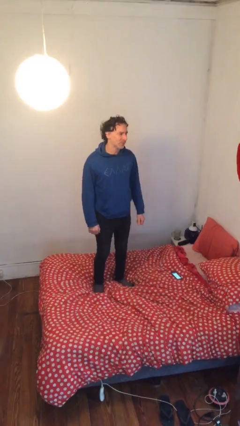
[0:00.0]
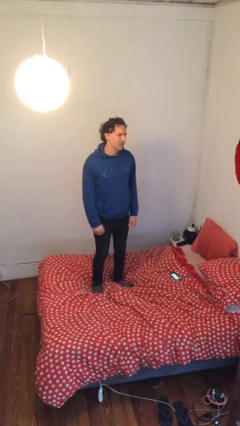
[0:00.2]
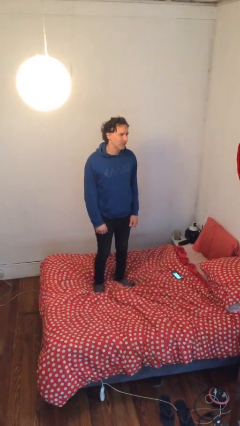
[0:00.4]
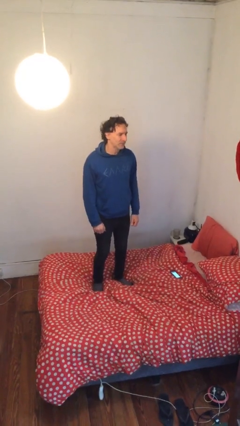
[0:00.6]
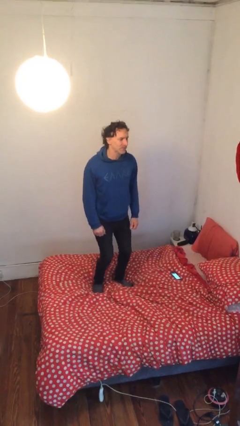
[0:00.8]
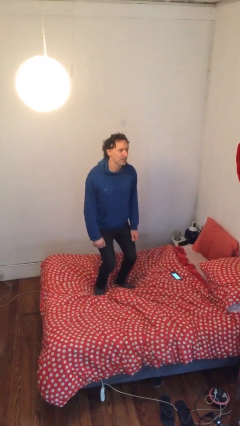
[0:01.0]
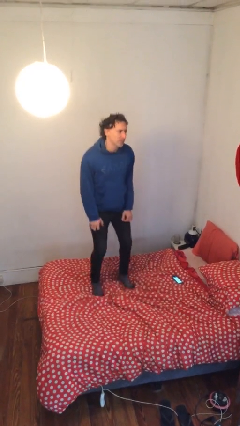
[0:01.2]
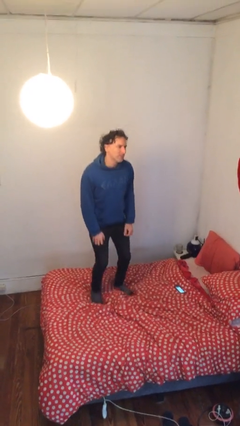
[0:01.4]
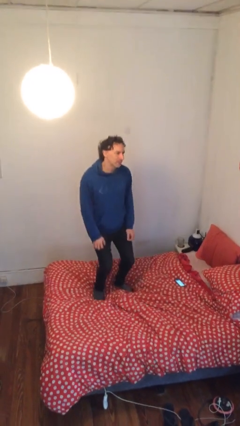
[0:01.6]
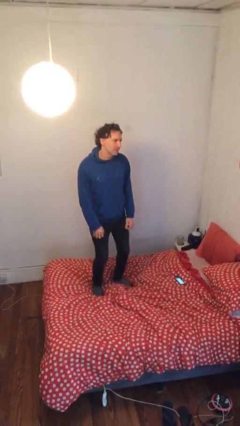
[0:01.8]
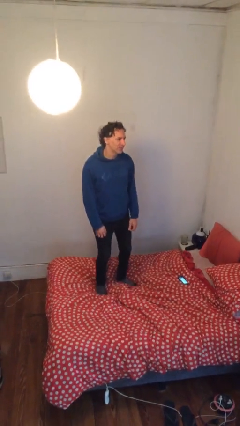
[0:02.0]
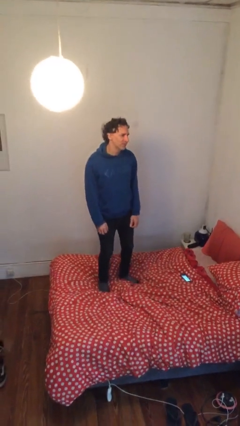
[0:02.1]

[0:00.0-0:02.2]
person jumps on bed

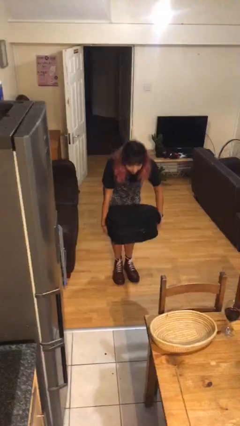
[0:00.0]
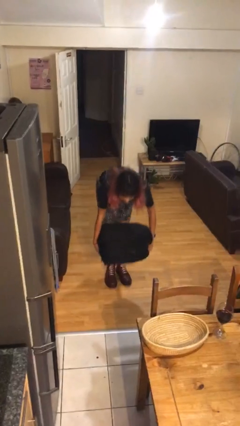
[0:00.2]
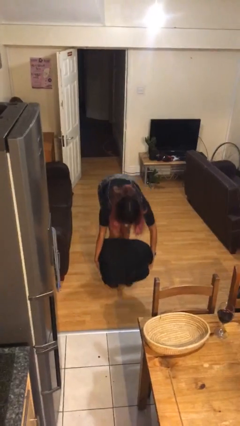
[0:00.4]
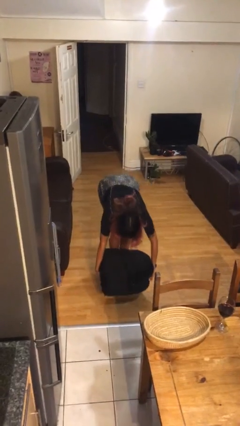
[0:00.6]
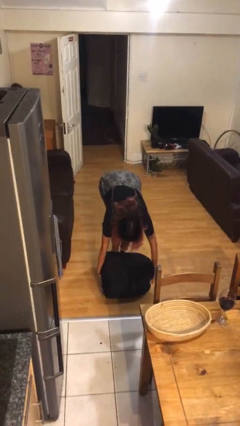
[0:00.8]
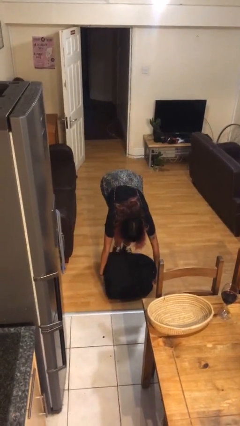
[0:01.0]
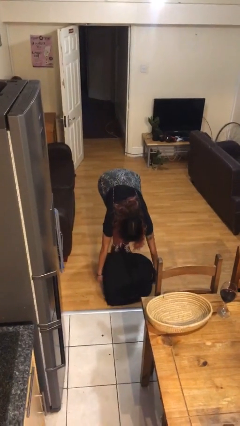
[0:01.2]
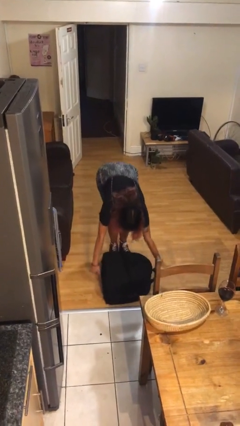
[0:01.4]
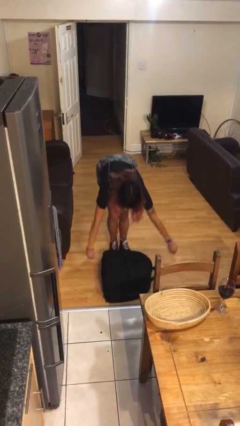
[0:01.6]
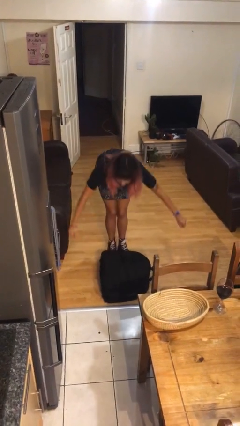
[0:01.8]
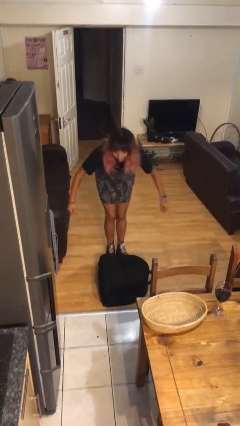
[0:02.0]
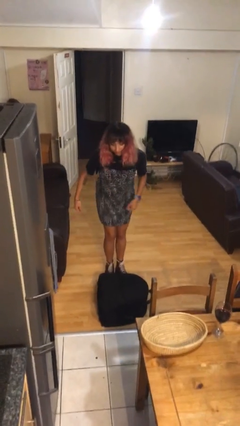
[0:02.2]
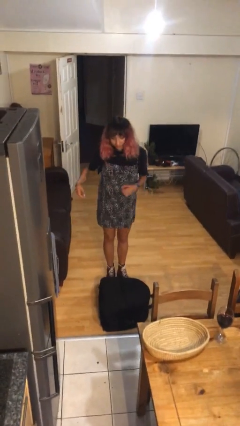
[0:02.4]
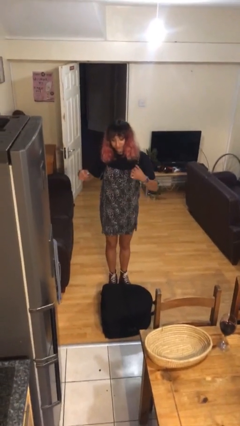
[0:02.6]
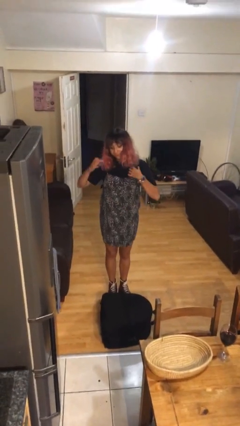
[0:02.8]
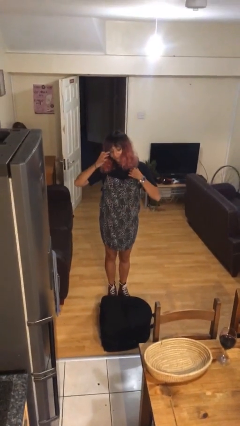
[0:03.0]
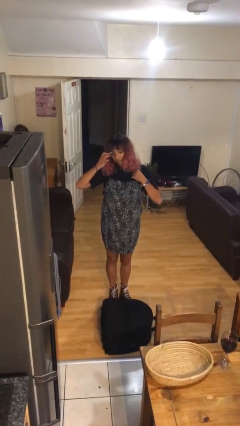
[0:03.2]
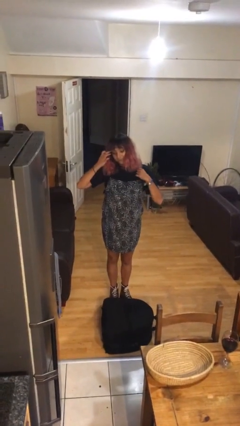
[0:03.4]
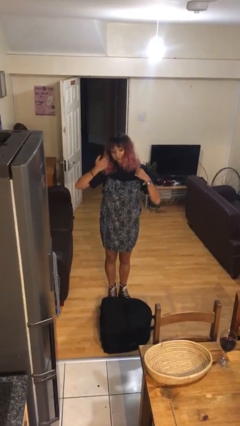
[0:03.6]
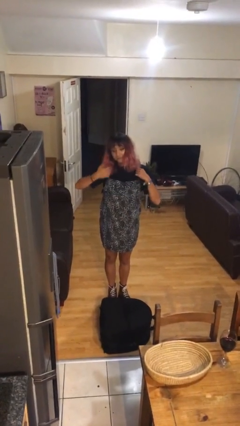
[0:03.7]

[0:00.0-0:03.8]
person puts down object on floor

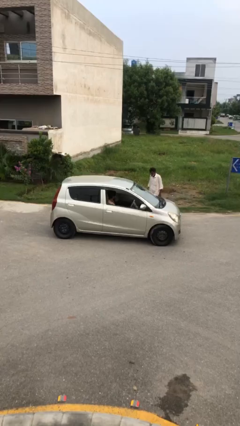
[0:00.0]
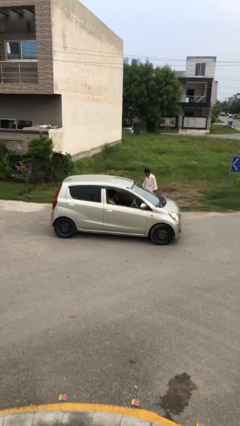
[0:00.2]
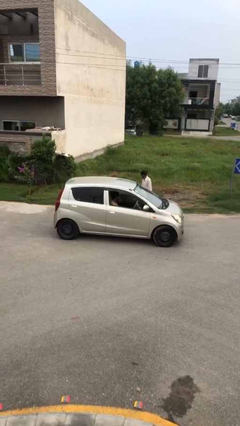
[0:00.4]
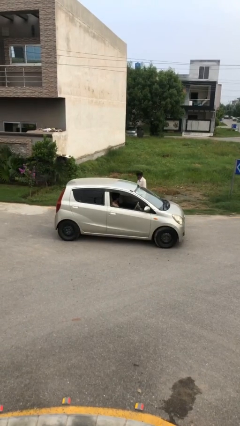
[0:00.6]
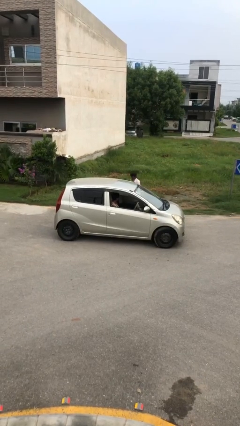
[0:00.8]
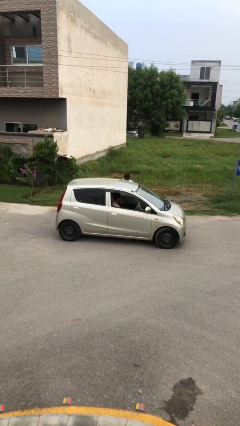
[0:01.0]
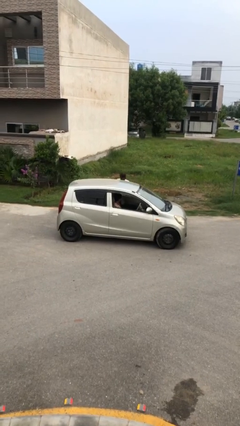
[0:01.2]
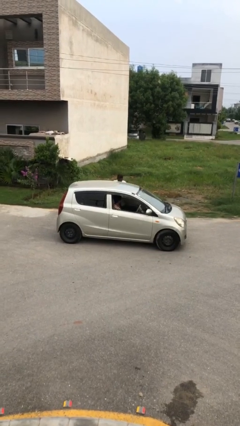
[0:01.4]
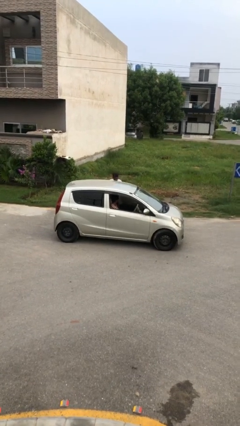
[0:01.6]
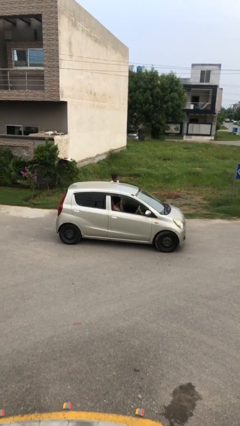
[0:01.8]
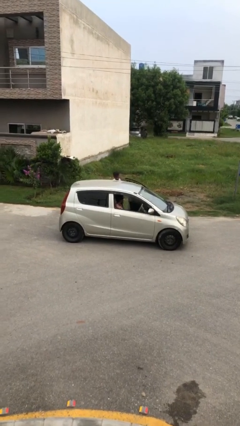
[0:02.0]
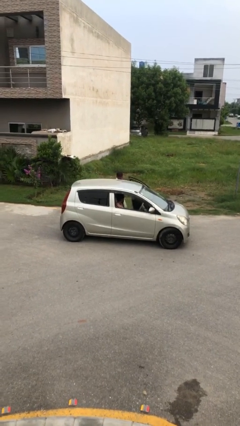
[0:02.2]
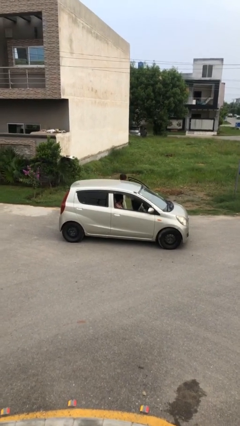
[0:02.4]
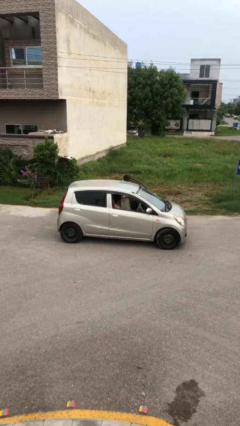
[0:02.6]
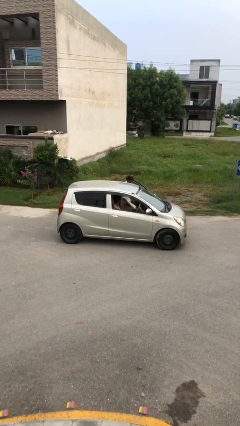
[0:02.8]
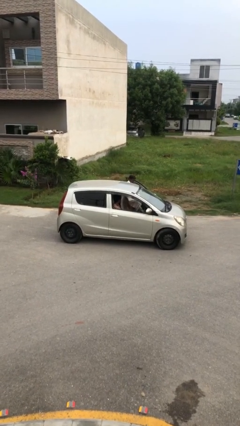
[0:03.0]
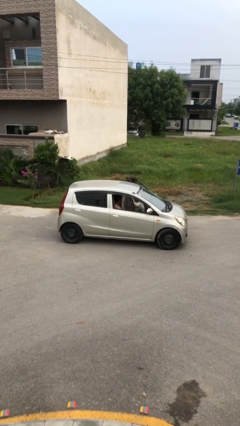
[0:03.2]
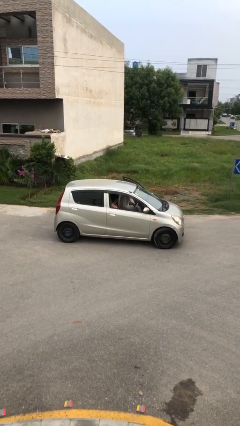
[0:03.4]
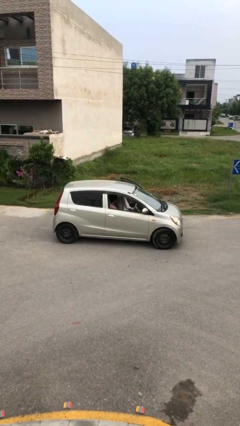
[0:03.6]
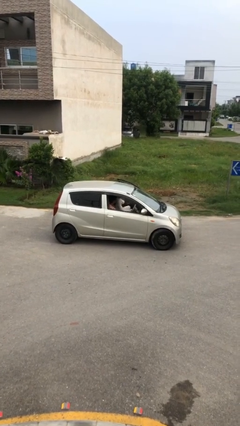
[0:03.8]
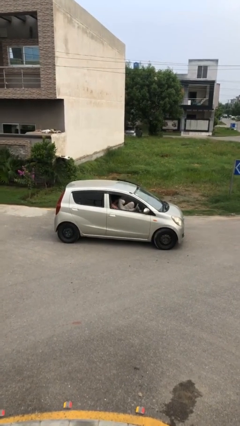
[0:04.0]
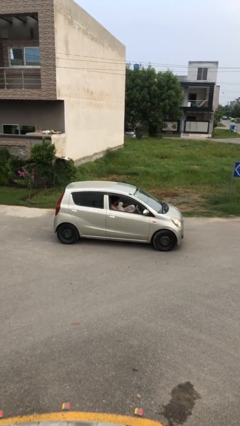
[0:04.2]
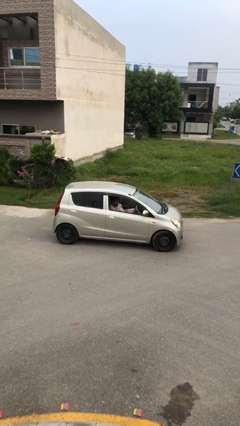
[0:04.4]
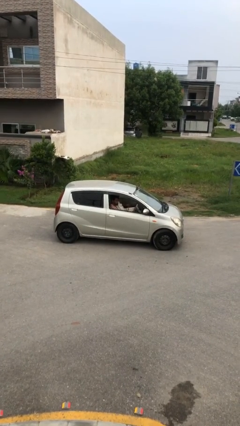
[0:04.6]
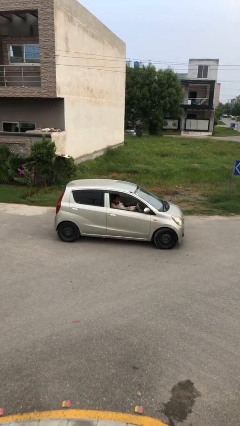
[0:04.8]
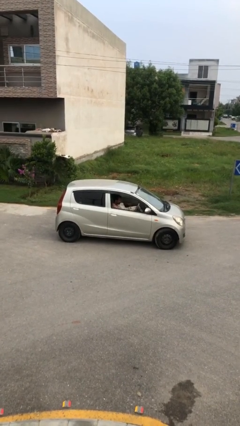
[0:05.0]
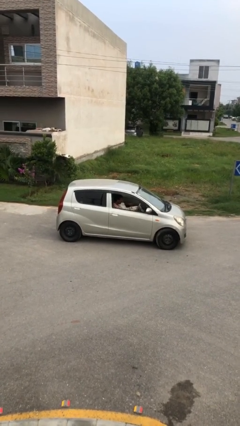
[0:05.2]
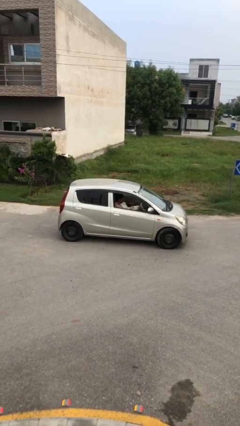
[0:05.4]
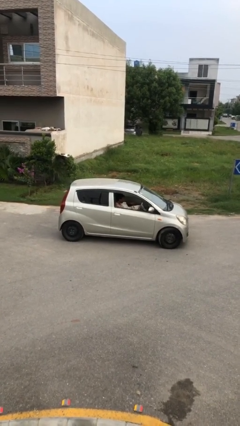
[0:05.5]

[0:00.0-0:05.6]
car picks up person

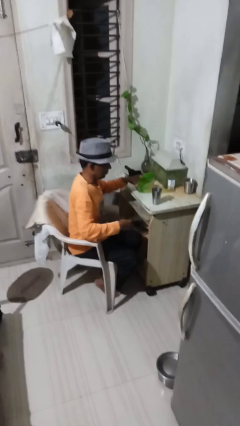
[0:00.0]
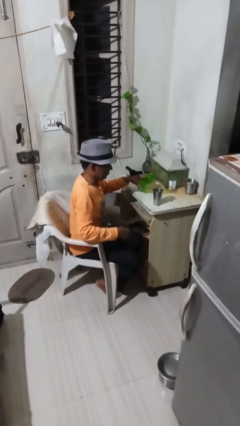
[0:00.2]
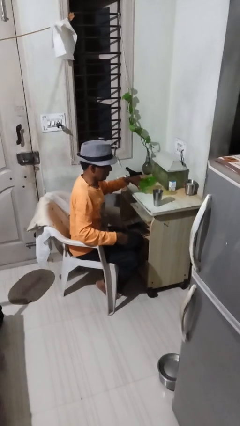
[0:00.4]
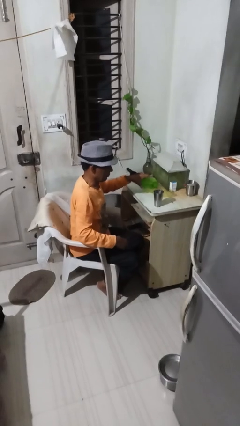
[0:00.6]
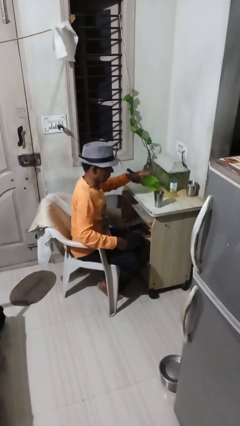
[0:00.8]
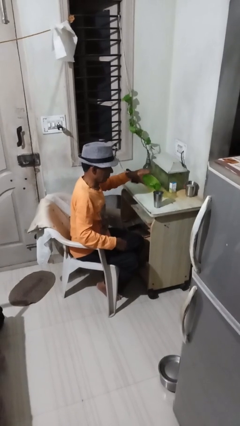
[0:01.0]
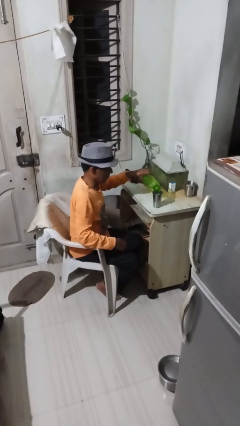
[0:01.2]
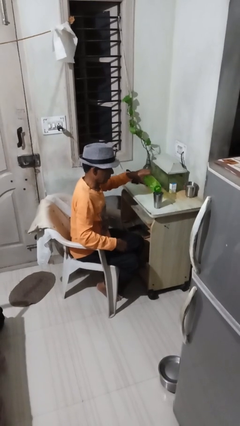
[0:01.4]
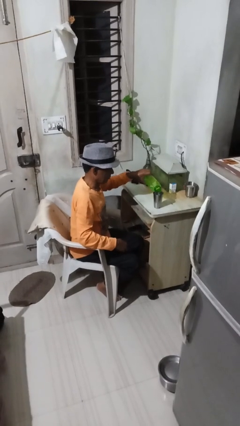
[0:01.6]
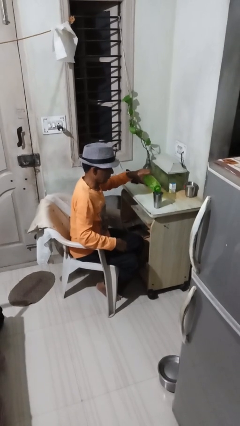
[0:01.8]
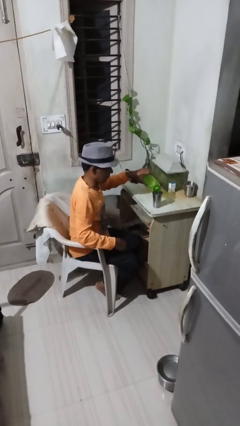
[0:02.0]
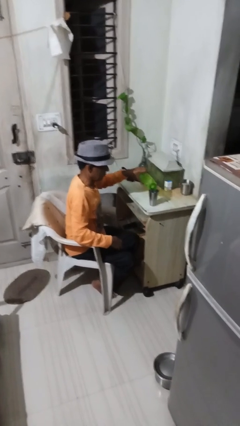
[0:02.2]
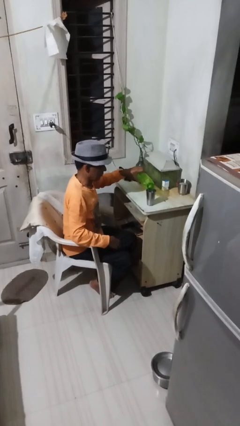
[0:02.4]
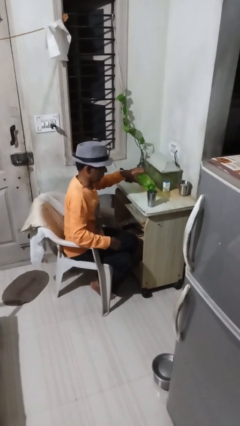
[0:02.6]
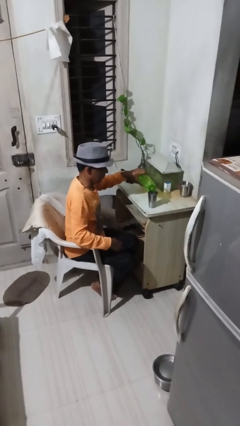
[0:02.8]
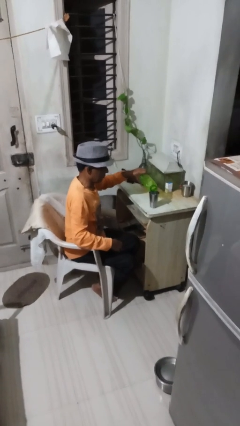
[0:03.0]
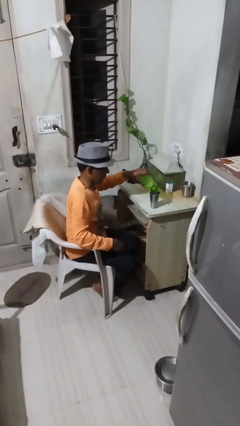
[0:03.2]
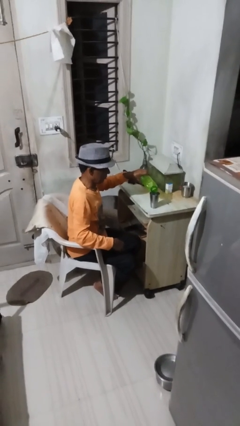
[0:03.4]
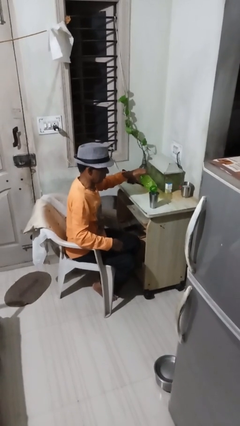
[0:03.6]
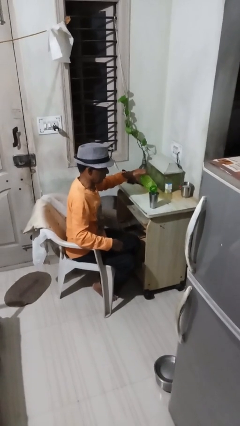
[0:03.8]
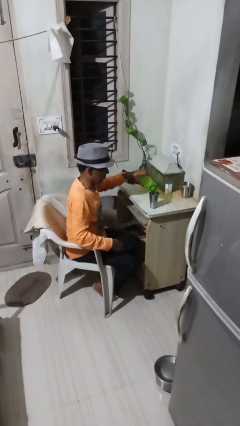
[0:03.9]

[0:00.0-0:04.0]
person pours liquid into cup

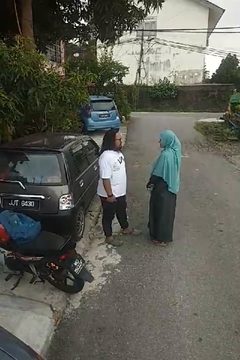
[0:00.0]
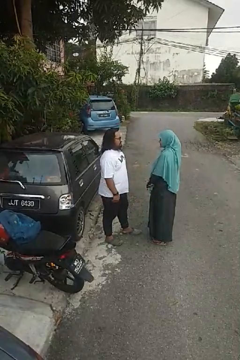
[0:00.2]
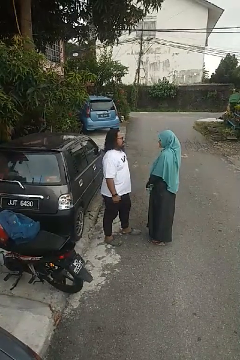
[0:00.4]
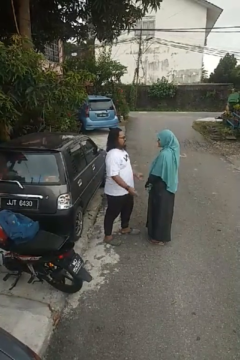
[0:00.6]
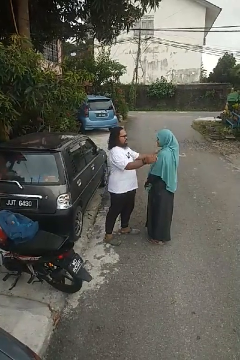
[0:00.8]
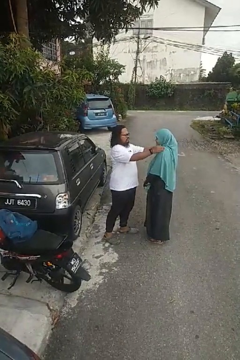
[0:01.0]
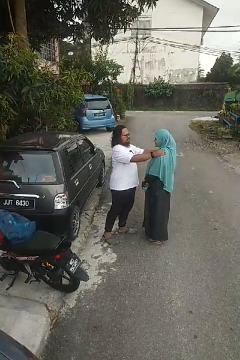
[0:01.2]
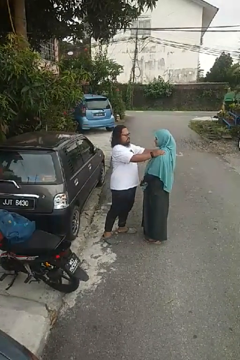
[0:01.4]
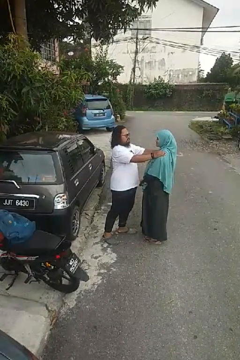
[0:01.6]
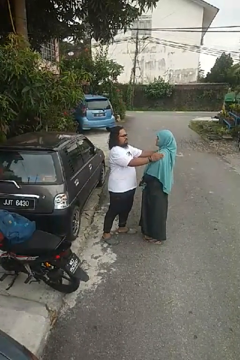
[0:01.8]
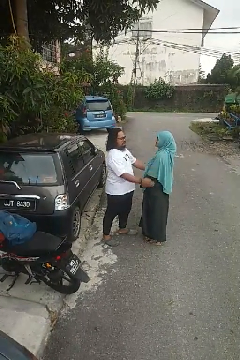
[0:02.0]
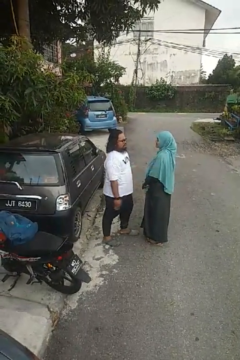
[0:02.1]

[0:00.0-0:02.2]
person pounds shoulders of person

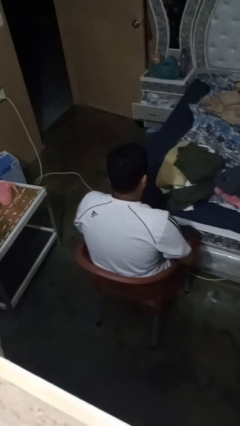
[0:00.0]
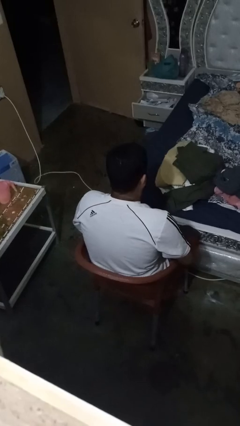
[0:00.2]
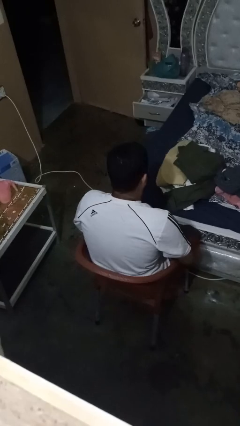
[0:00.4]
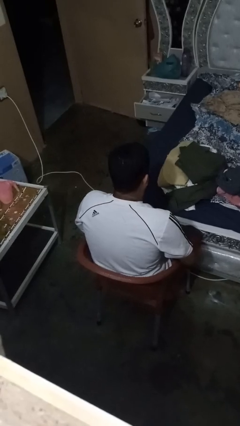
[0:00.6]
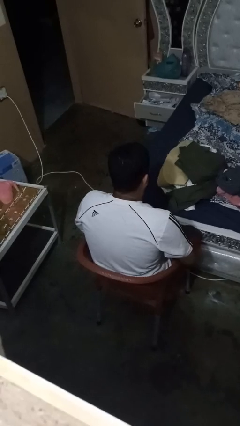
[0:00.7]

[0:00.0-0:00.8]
person folds pants
